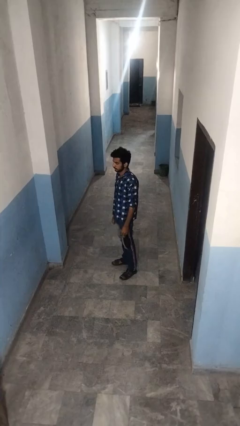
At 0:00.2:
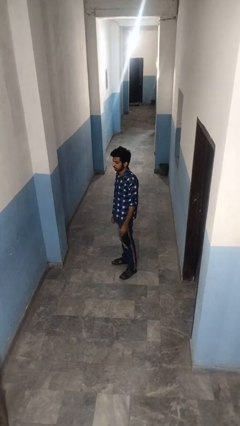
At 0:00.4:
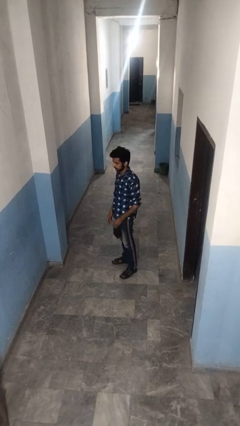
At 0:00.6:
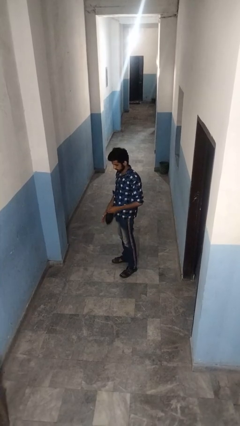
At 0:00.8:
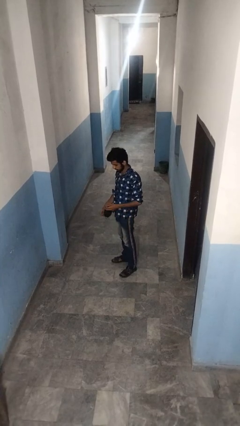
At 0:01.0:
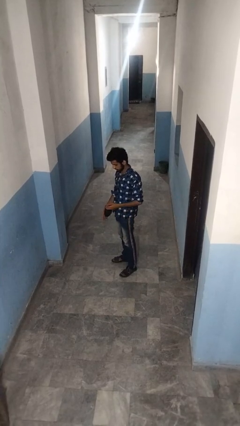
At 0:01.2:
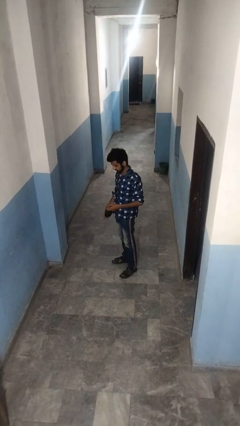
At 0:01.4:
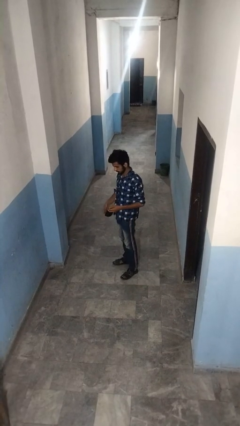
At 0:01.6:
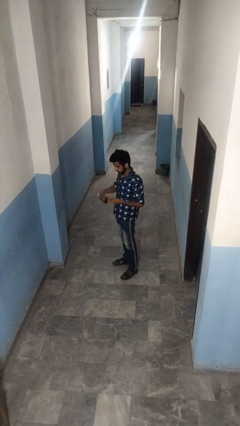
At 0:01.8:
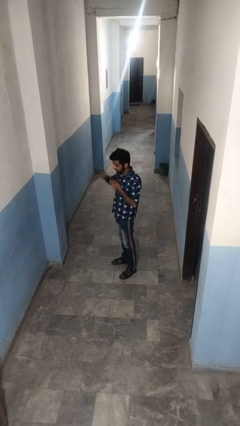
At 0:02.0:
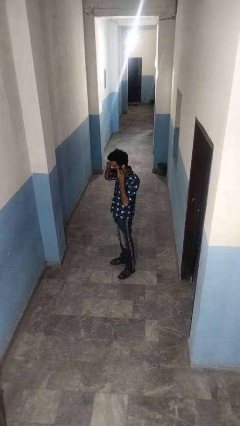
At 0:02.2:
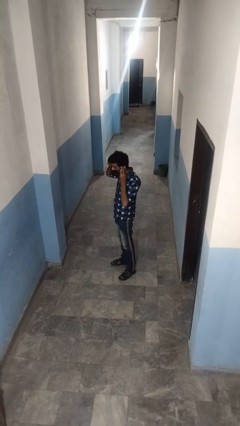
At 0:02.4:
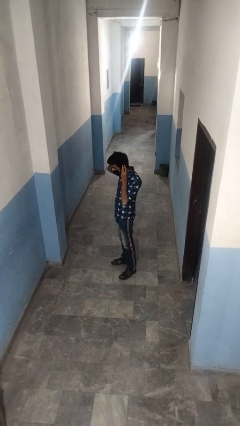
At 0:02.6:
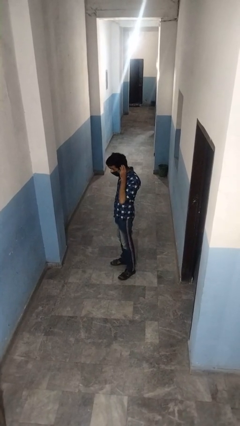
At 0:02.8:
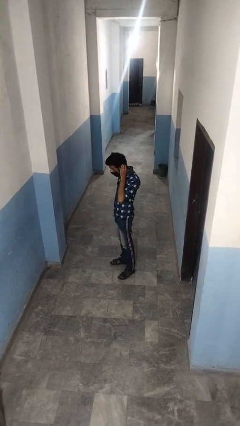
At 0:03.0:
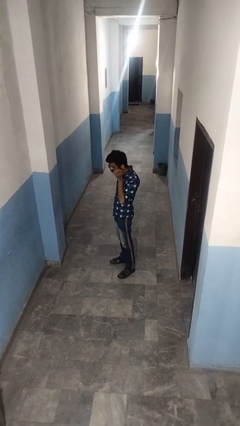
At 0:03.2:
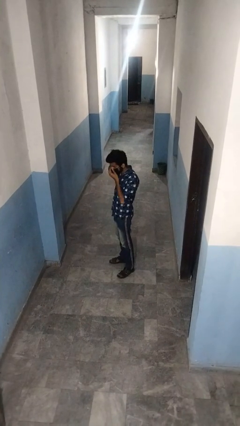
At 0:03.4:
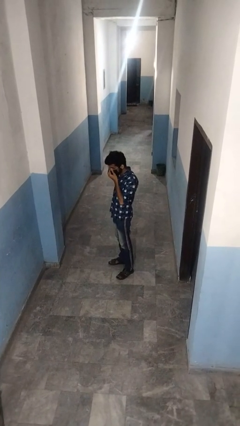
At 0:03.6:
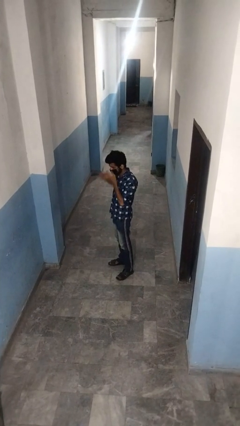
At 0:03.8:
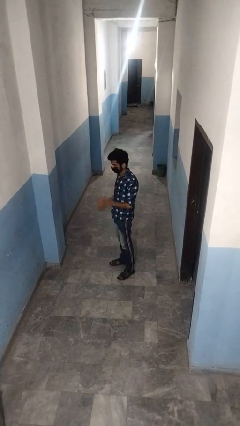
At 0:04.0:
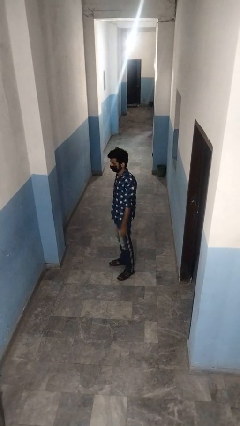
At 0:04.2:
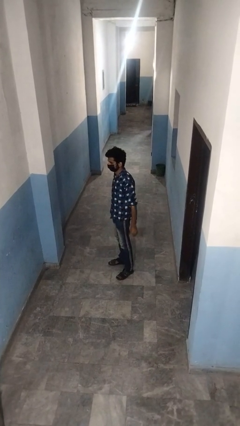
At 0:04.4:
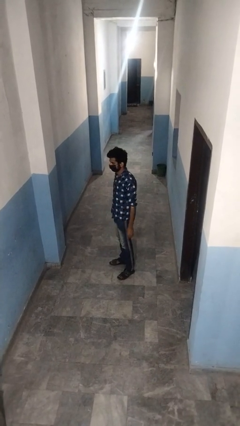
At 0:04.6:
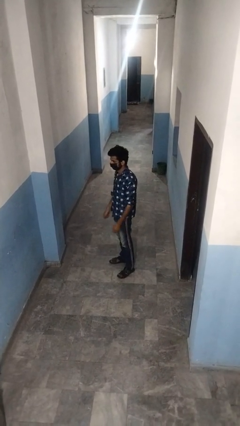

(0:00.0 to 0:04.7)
person puts on facemask

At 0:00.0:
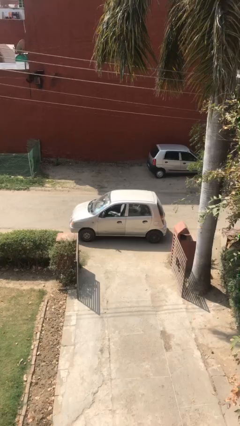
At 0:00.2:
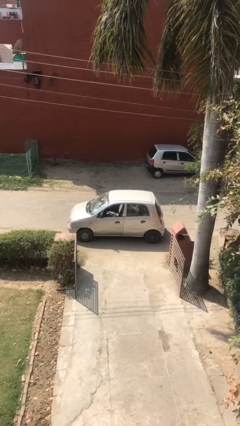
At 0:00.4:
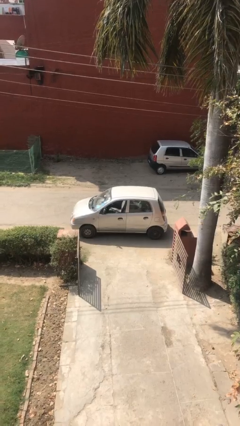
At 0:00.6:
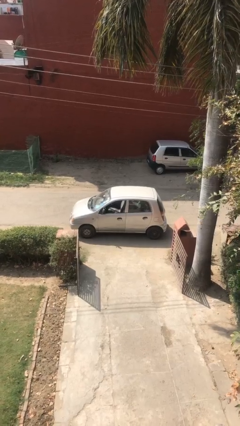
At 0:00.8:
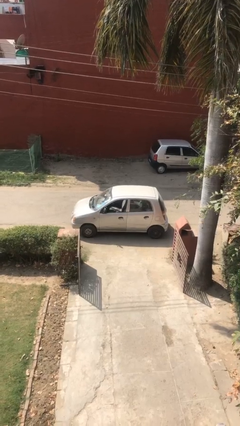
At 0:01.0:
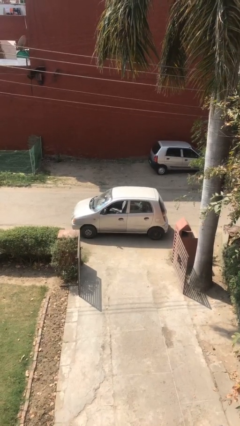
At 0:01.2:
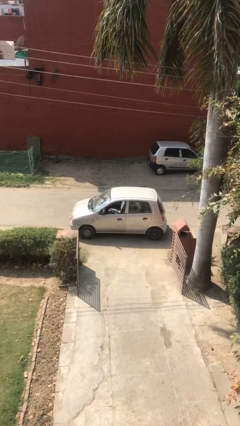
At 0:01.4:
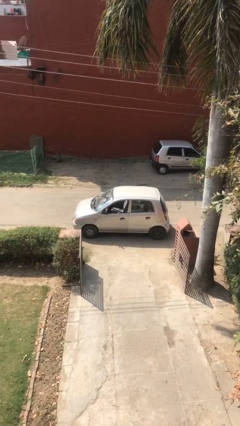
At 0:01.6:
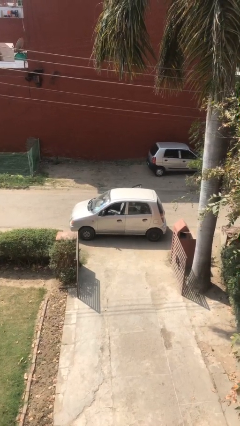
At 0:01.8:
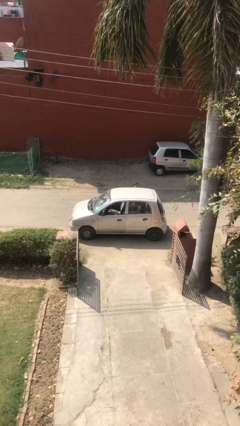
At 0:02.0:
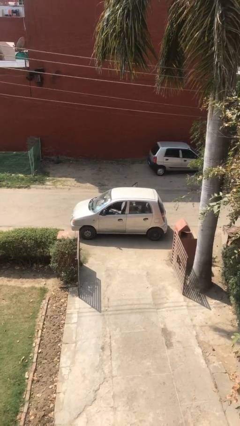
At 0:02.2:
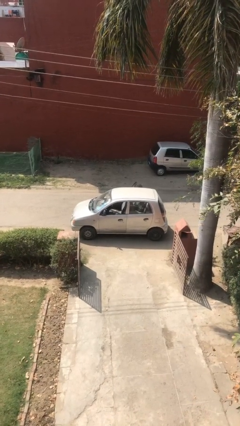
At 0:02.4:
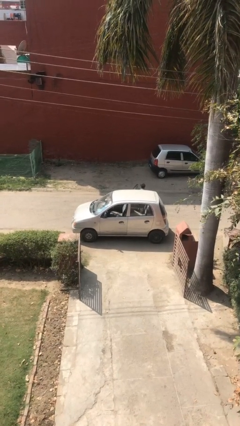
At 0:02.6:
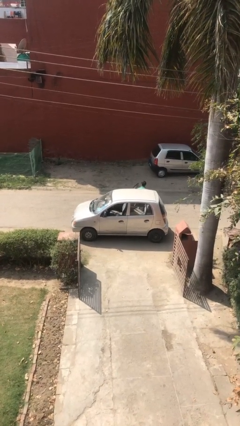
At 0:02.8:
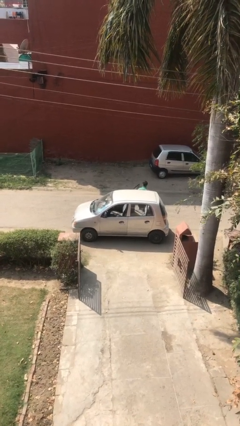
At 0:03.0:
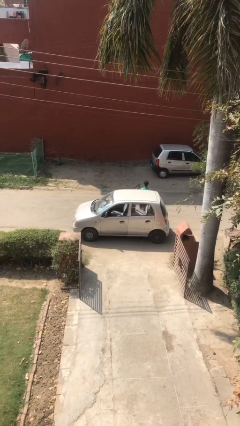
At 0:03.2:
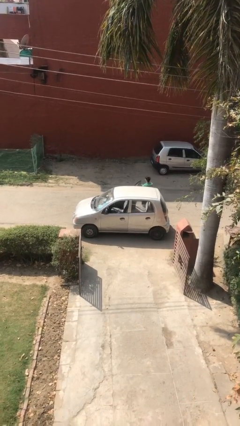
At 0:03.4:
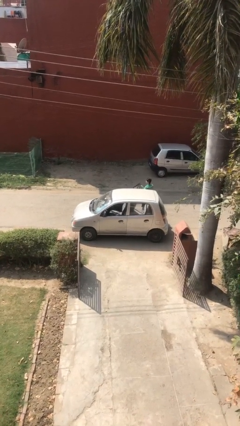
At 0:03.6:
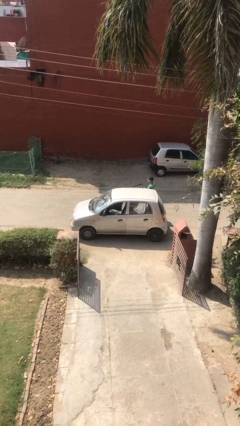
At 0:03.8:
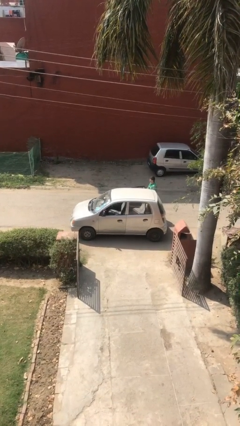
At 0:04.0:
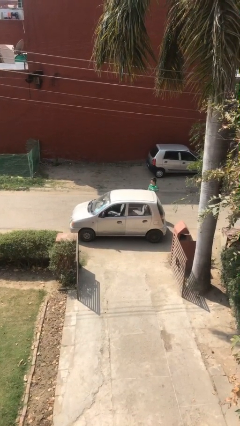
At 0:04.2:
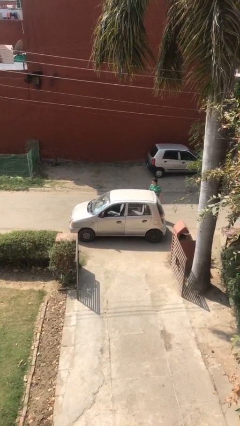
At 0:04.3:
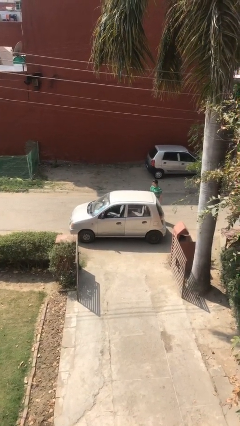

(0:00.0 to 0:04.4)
car drops off person

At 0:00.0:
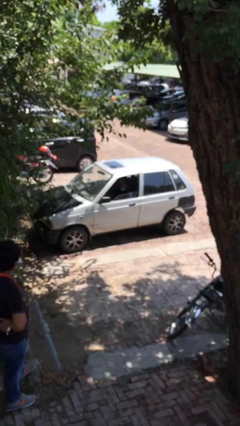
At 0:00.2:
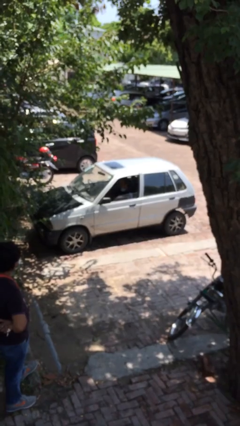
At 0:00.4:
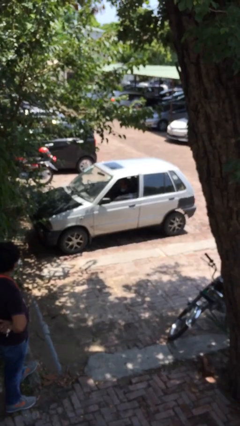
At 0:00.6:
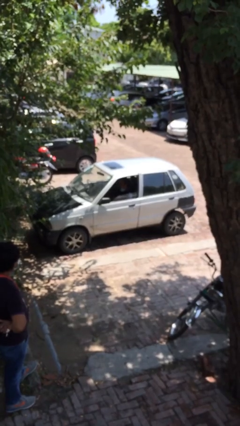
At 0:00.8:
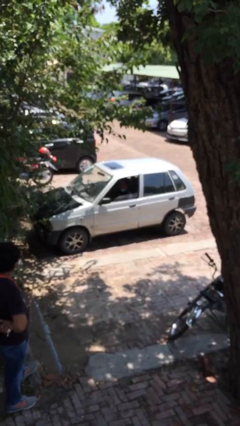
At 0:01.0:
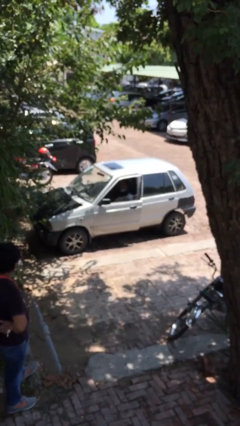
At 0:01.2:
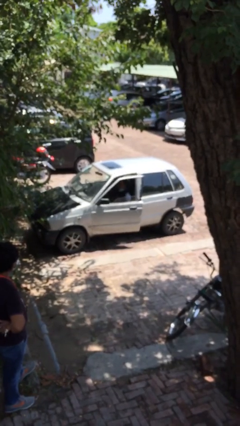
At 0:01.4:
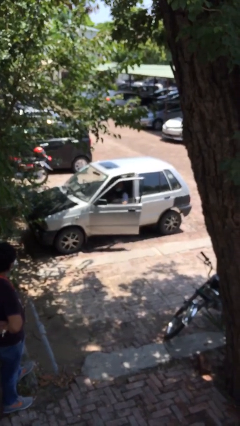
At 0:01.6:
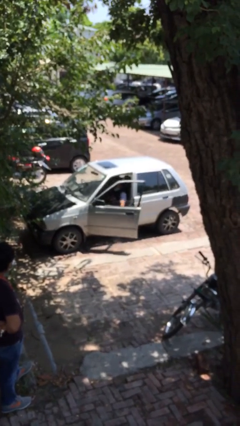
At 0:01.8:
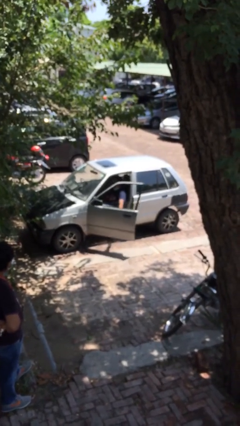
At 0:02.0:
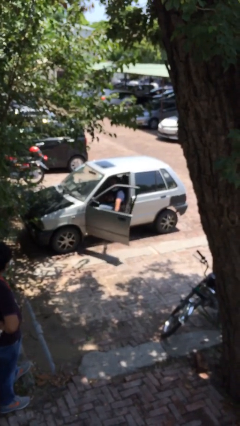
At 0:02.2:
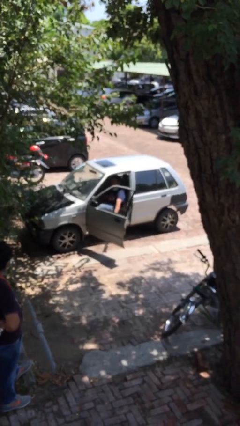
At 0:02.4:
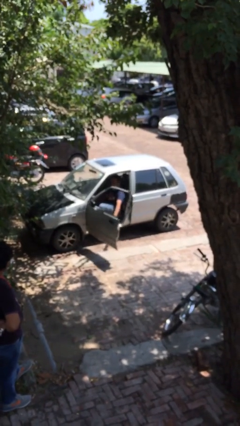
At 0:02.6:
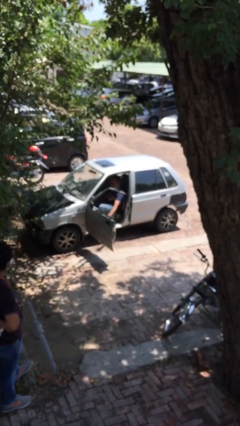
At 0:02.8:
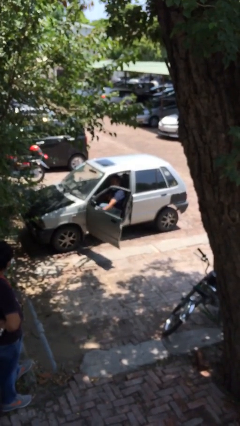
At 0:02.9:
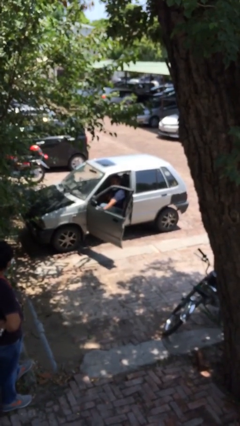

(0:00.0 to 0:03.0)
person opens car door

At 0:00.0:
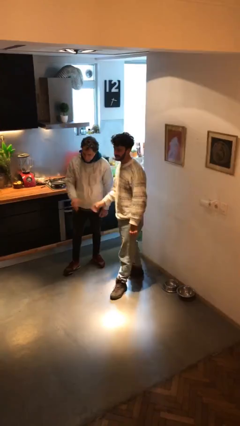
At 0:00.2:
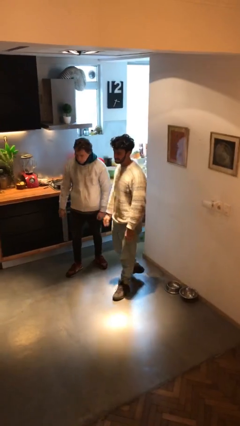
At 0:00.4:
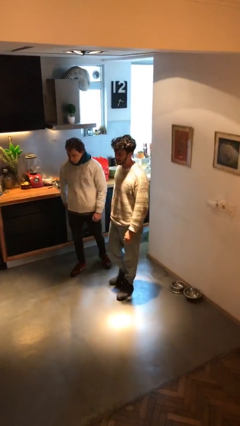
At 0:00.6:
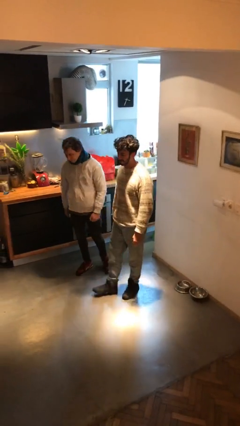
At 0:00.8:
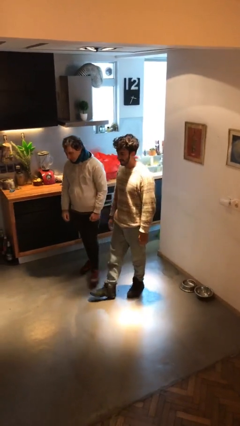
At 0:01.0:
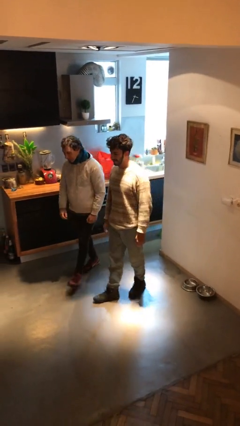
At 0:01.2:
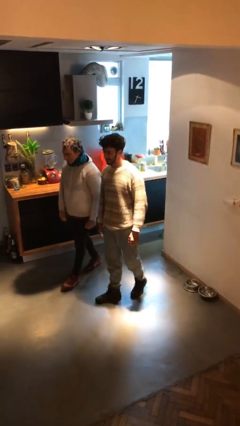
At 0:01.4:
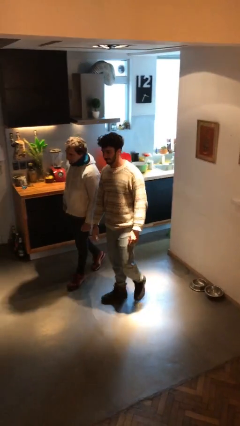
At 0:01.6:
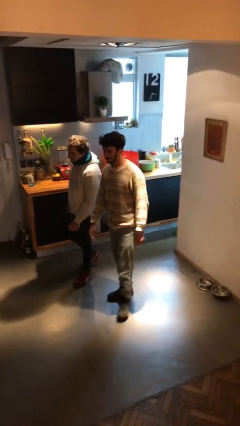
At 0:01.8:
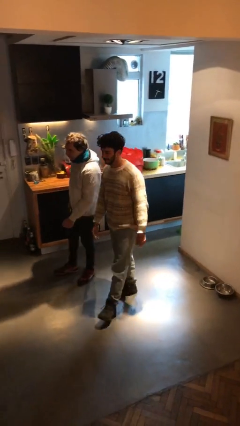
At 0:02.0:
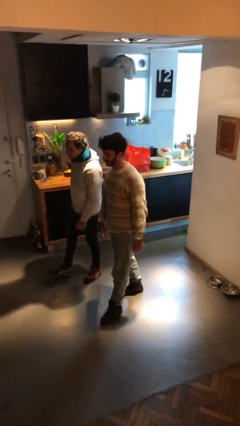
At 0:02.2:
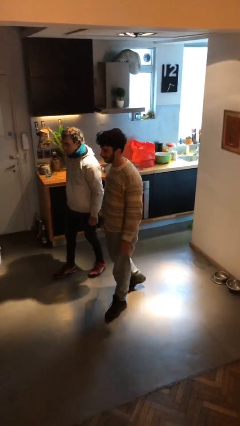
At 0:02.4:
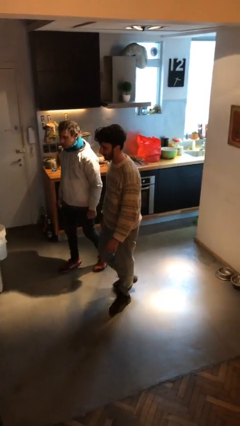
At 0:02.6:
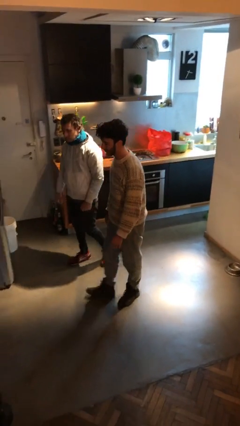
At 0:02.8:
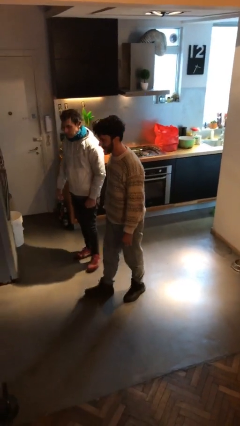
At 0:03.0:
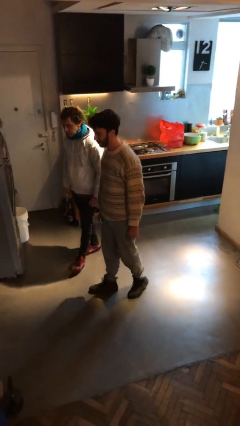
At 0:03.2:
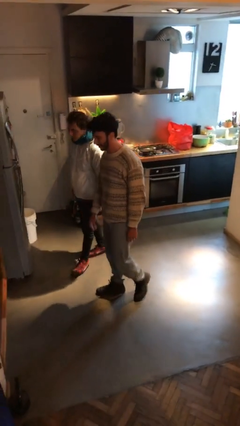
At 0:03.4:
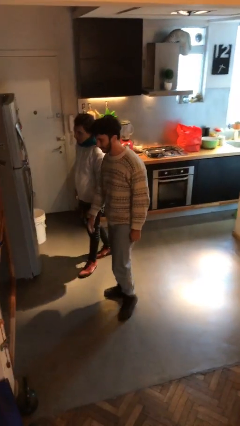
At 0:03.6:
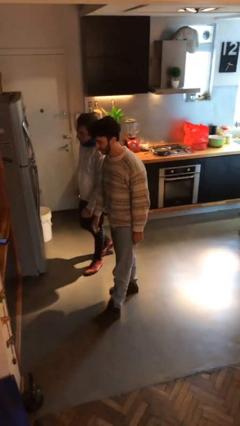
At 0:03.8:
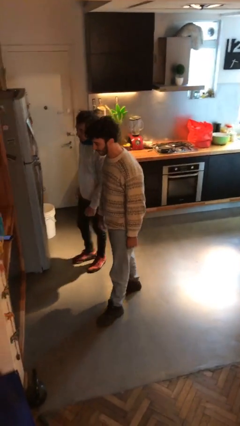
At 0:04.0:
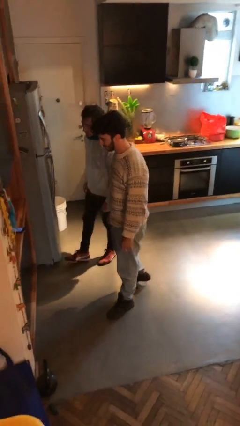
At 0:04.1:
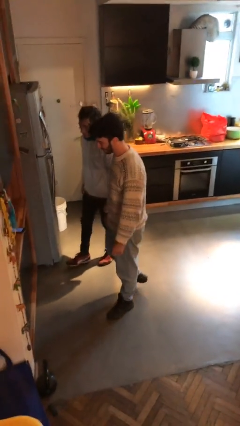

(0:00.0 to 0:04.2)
person talks to person

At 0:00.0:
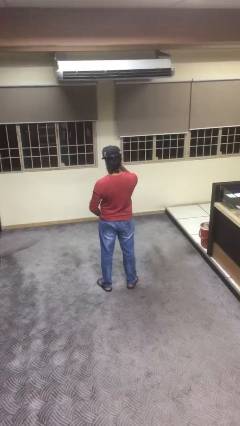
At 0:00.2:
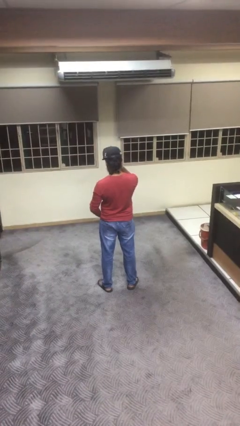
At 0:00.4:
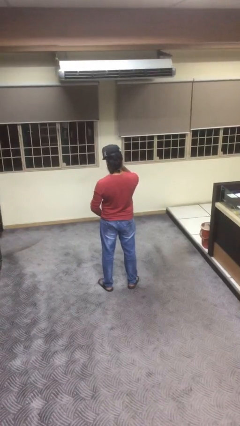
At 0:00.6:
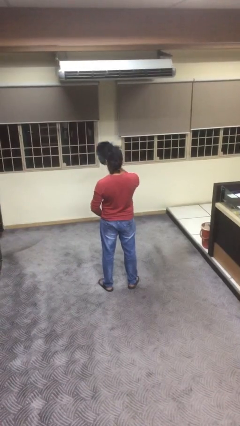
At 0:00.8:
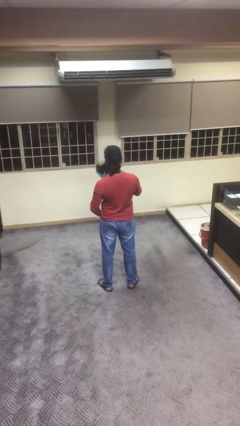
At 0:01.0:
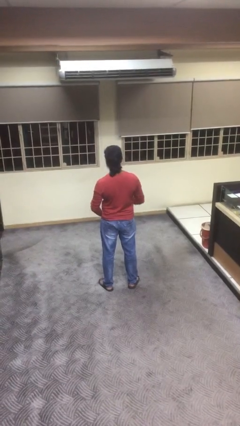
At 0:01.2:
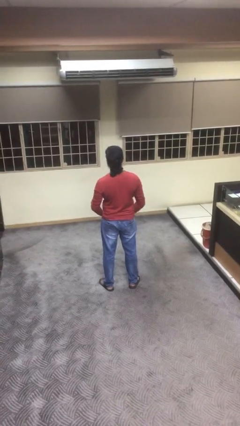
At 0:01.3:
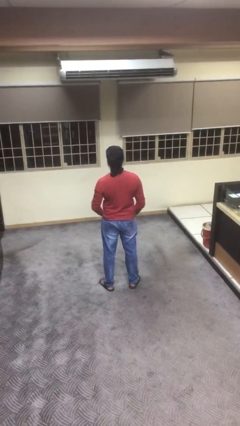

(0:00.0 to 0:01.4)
person takes off hat
